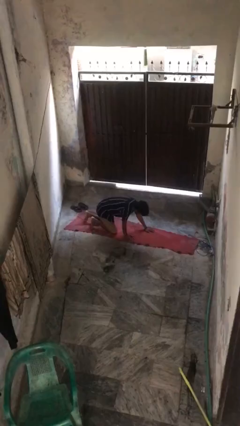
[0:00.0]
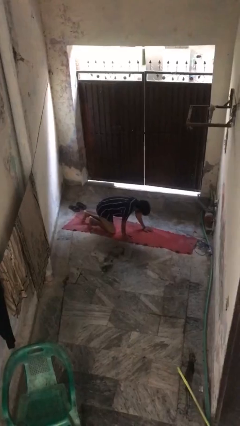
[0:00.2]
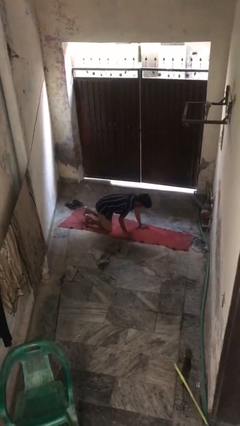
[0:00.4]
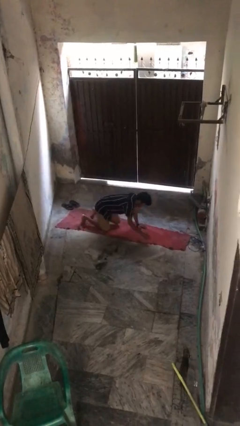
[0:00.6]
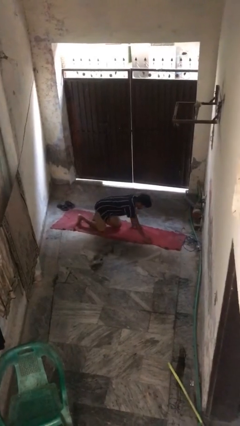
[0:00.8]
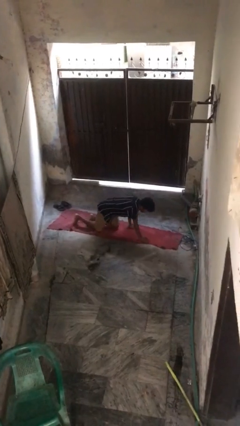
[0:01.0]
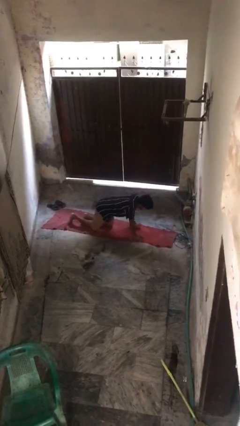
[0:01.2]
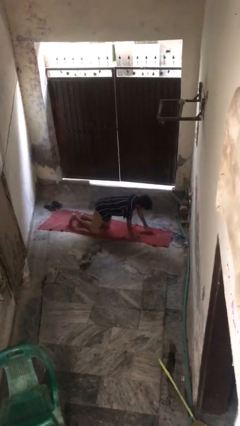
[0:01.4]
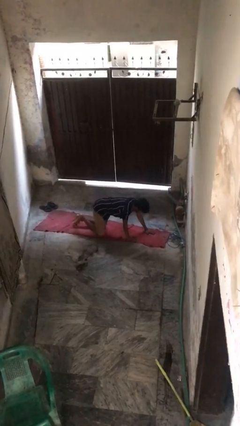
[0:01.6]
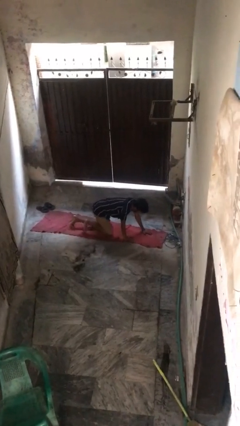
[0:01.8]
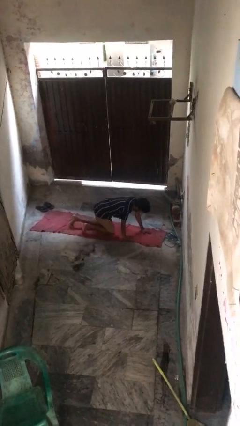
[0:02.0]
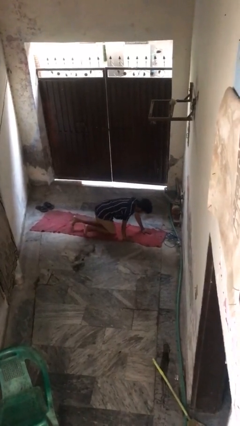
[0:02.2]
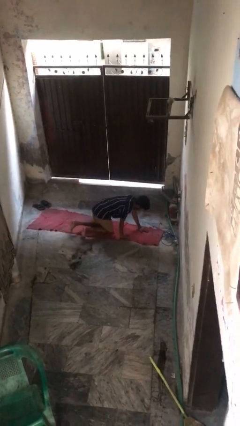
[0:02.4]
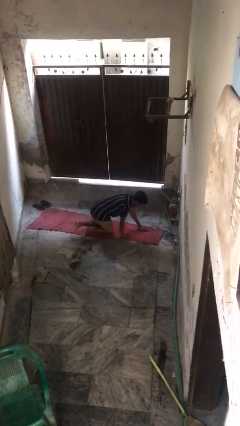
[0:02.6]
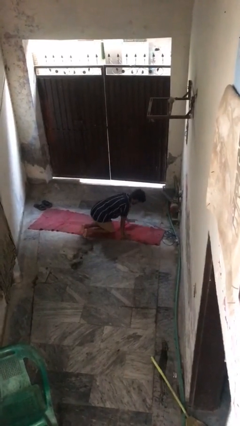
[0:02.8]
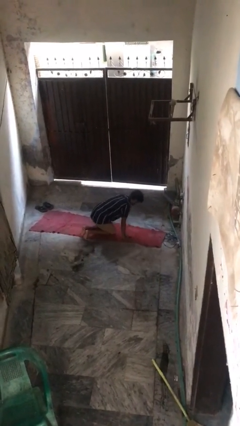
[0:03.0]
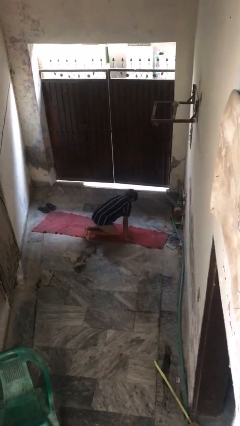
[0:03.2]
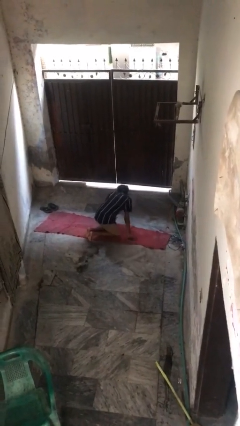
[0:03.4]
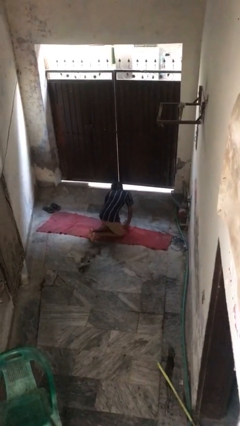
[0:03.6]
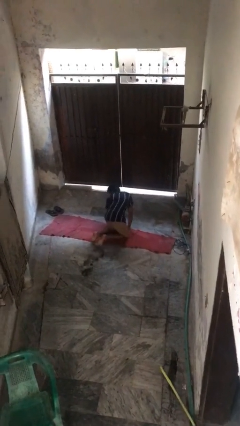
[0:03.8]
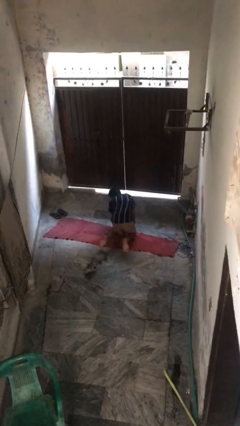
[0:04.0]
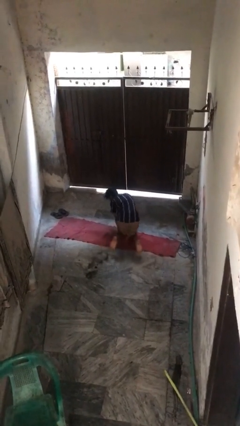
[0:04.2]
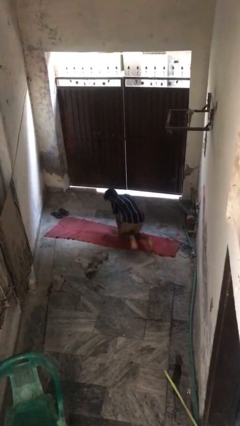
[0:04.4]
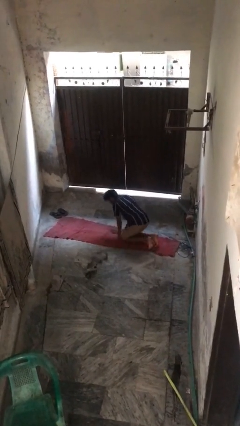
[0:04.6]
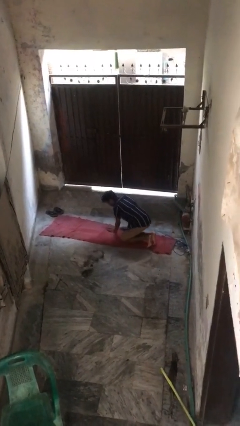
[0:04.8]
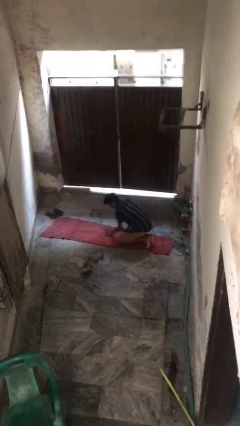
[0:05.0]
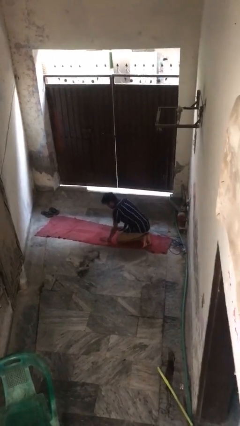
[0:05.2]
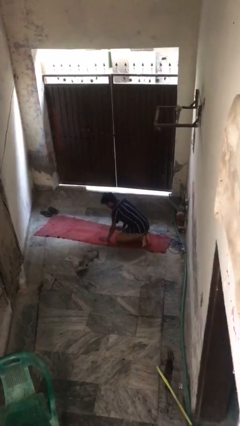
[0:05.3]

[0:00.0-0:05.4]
person crawls

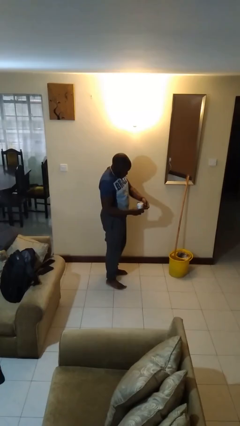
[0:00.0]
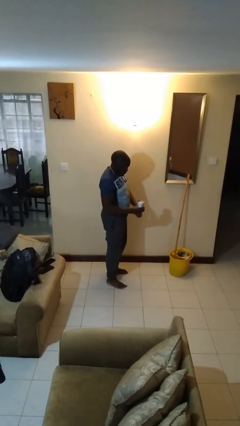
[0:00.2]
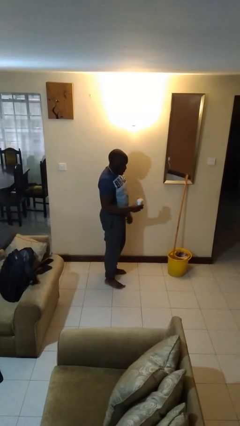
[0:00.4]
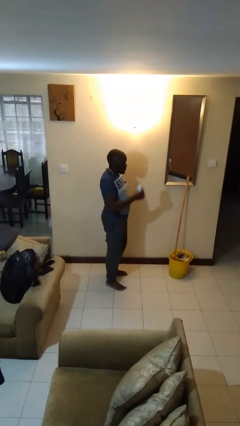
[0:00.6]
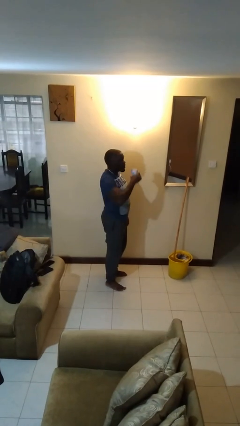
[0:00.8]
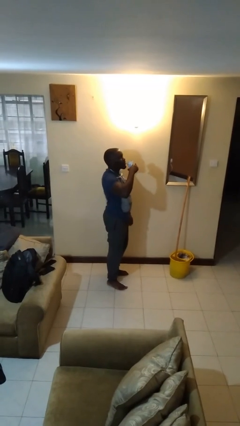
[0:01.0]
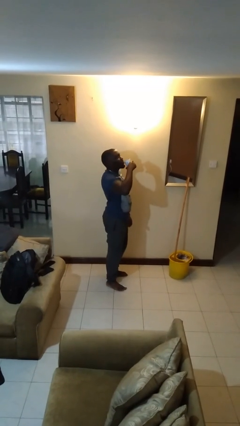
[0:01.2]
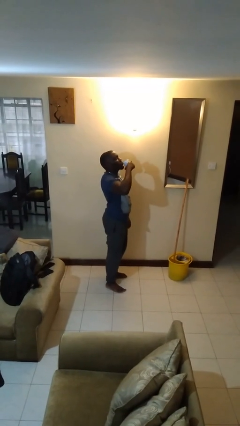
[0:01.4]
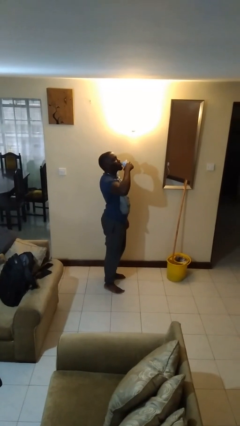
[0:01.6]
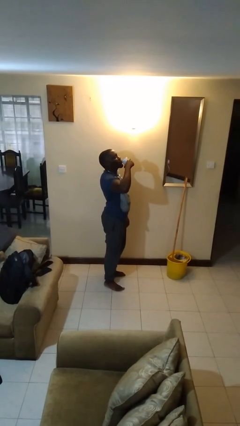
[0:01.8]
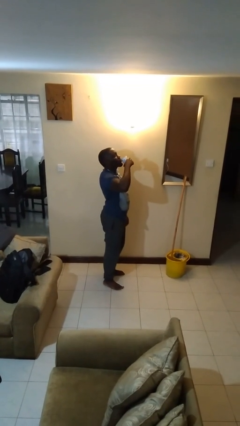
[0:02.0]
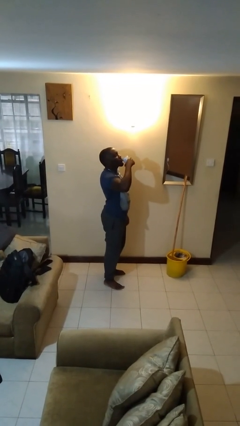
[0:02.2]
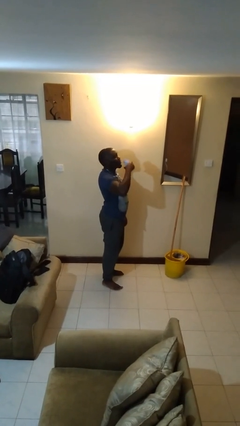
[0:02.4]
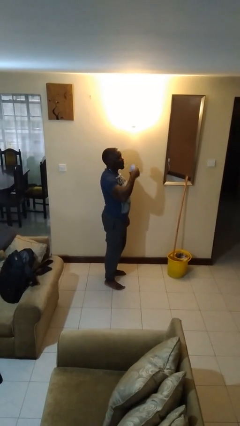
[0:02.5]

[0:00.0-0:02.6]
person drinks from beverage can

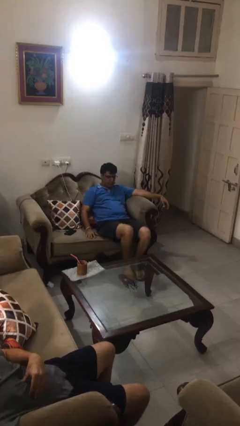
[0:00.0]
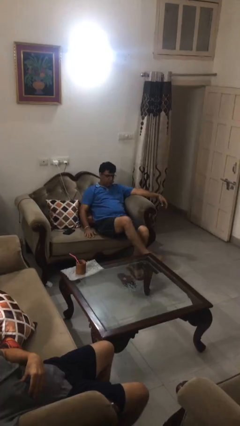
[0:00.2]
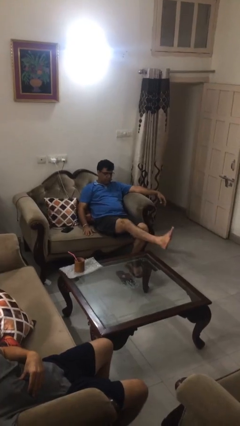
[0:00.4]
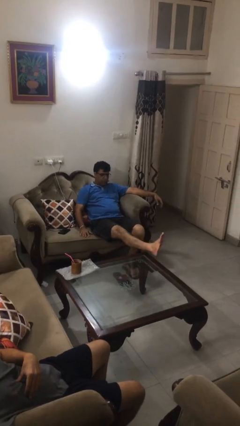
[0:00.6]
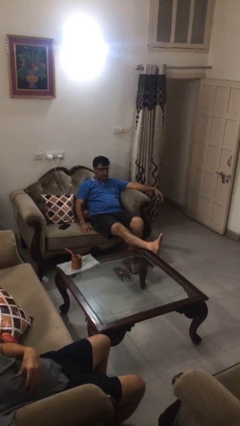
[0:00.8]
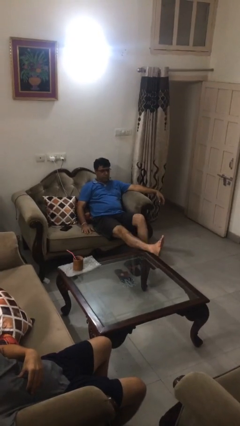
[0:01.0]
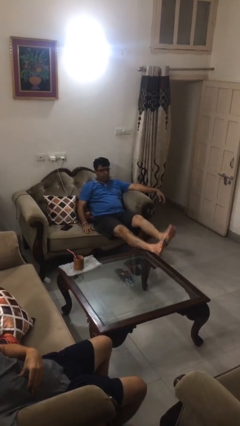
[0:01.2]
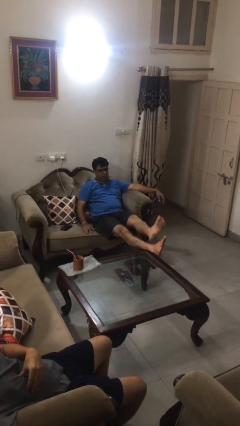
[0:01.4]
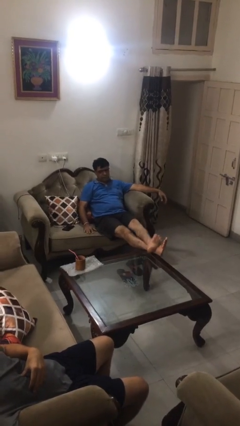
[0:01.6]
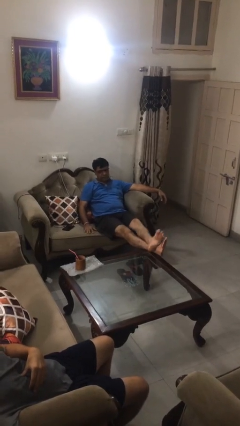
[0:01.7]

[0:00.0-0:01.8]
person puts feet up

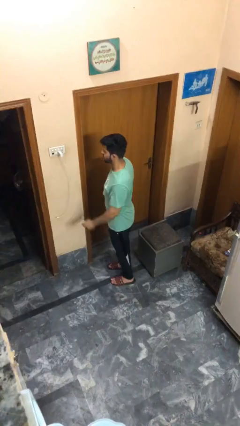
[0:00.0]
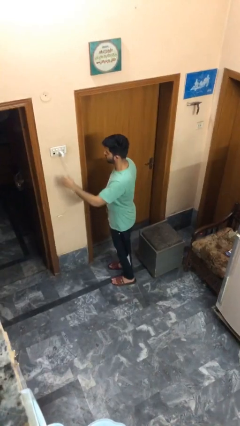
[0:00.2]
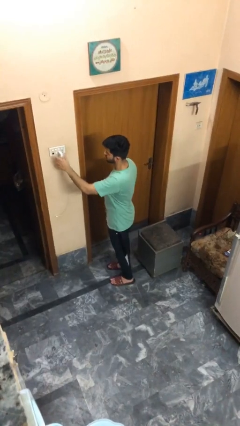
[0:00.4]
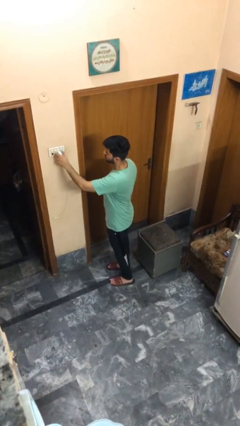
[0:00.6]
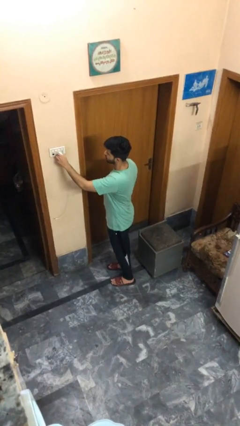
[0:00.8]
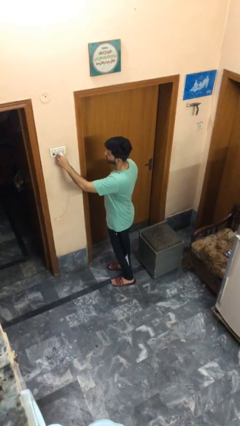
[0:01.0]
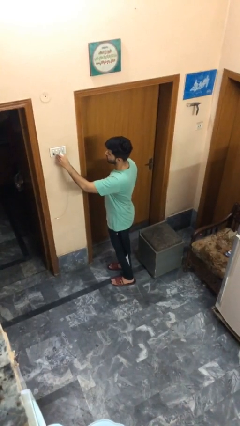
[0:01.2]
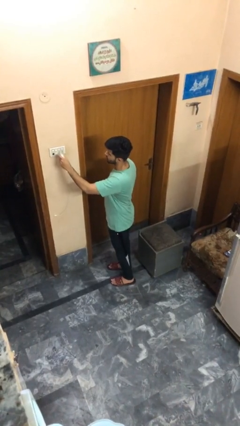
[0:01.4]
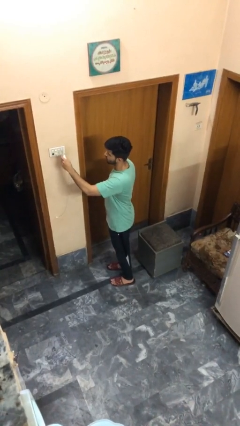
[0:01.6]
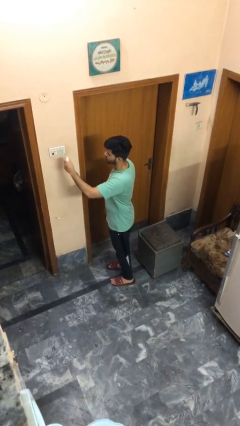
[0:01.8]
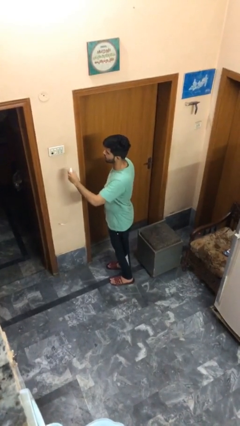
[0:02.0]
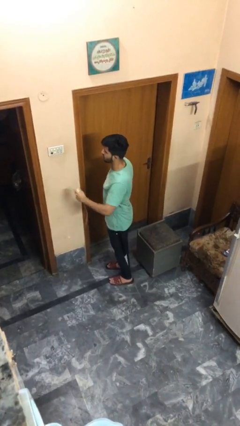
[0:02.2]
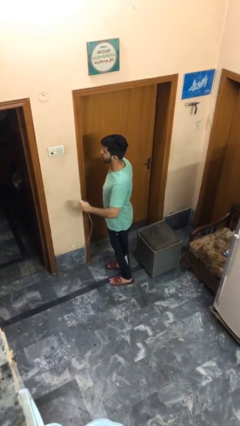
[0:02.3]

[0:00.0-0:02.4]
person unplugs from electrical socket

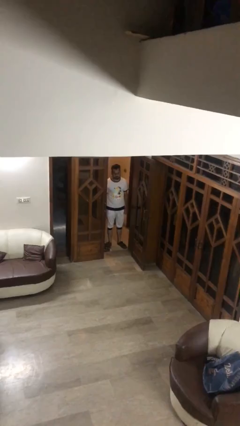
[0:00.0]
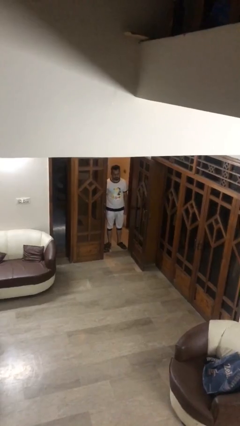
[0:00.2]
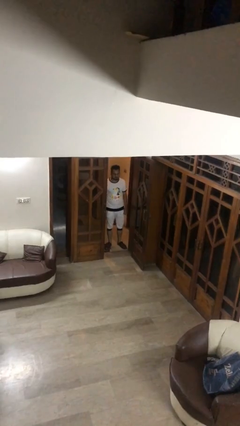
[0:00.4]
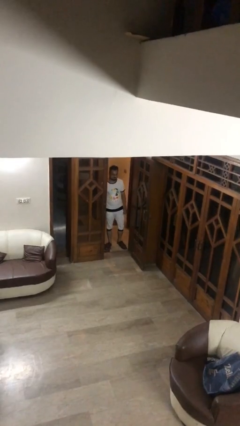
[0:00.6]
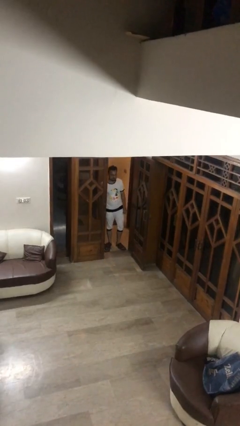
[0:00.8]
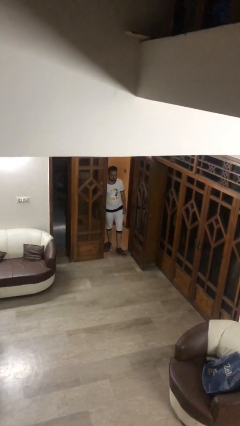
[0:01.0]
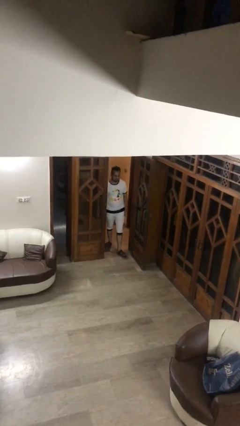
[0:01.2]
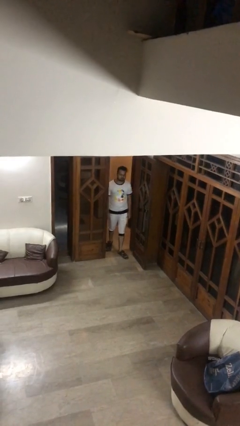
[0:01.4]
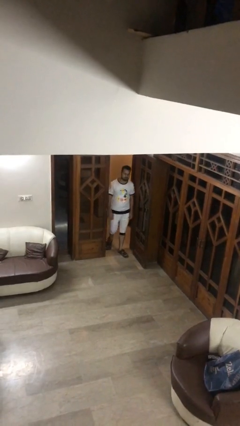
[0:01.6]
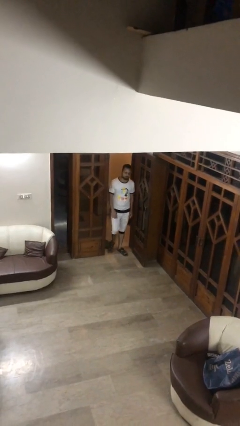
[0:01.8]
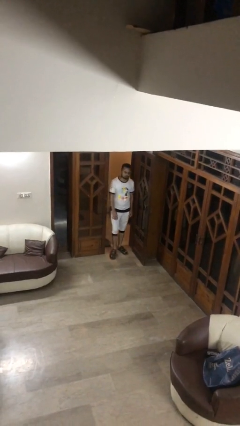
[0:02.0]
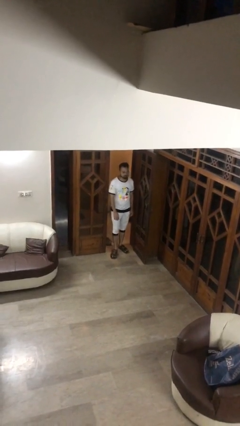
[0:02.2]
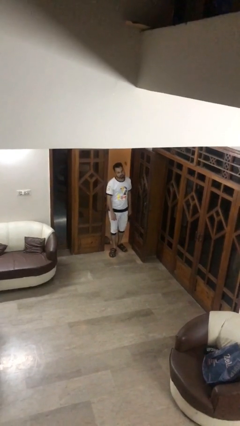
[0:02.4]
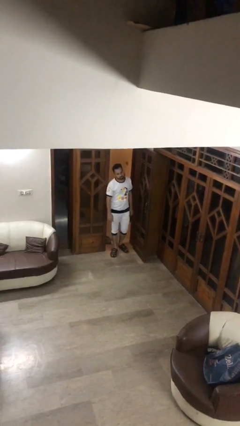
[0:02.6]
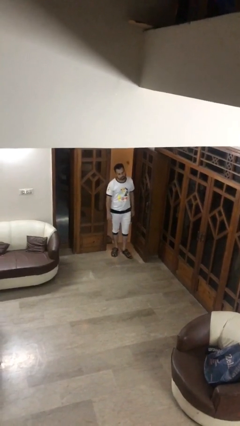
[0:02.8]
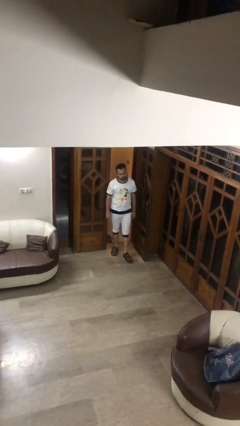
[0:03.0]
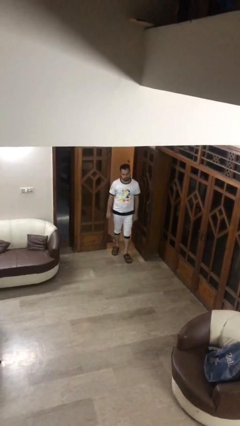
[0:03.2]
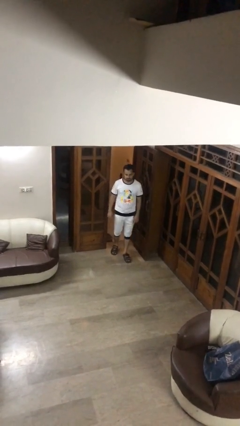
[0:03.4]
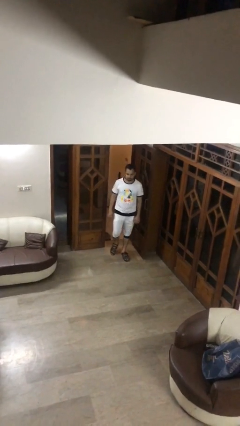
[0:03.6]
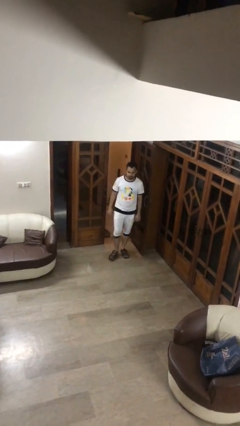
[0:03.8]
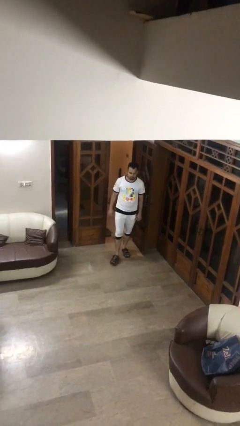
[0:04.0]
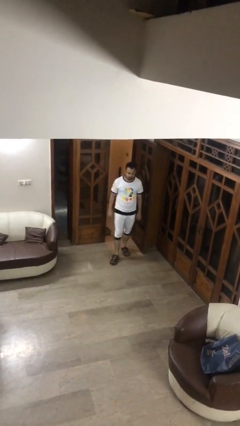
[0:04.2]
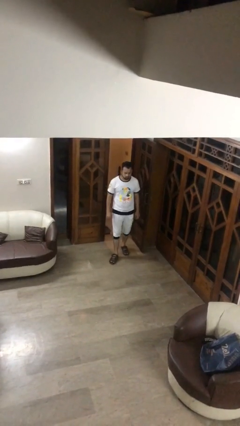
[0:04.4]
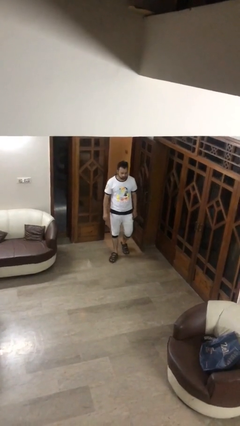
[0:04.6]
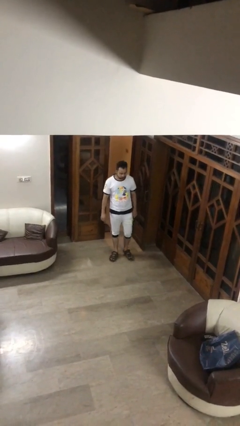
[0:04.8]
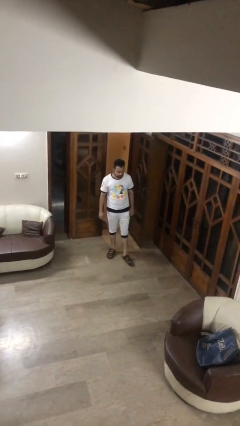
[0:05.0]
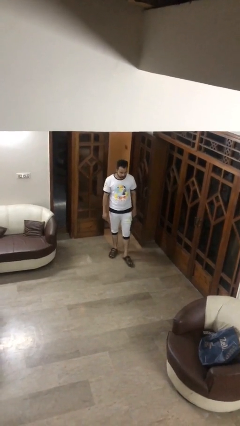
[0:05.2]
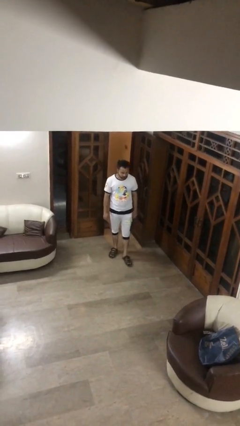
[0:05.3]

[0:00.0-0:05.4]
person enters scene through structure

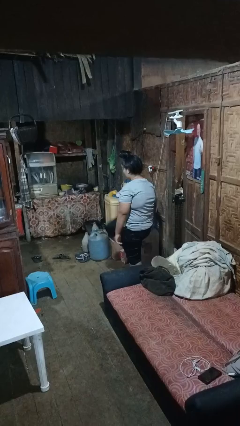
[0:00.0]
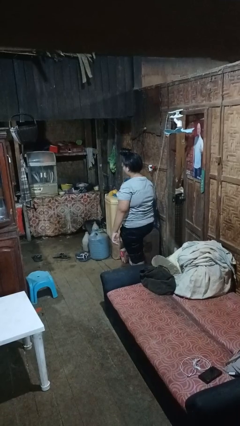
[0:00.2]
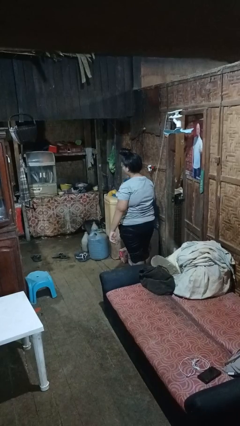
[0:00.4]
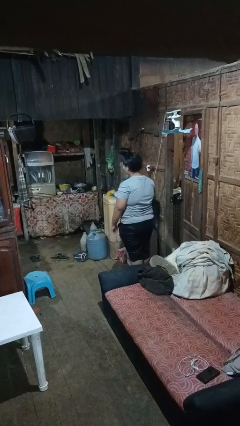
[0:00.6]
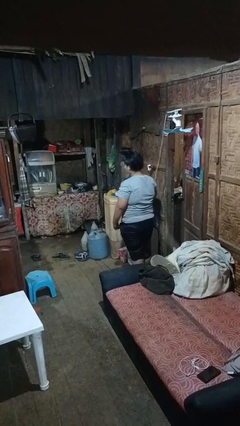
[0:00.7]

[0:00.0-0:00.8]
person karate kicks
